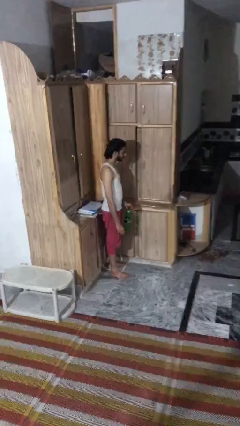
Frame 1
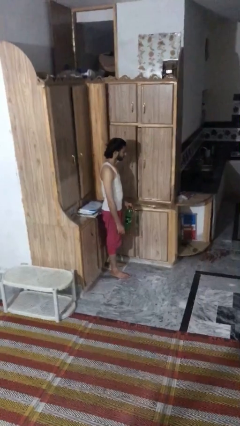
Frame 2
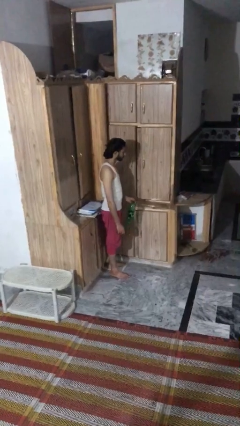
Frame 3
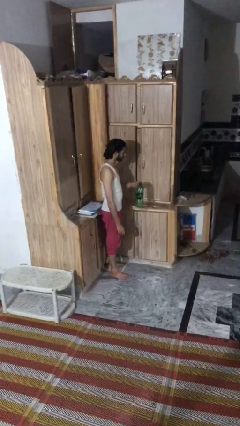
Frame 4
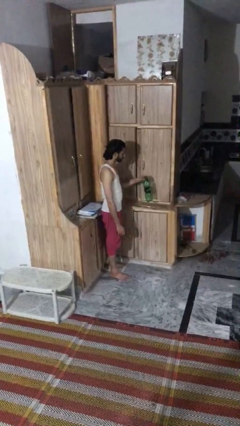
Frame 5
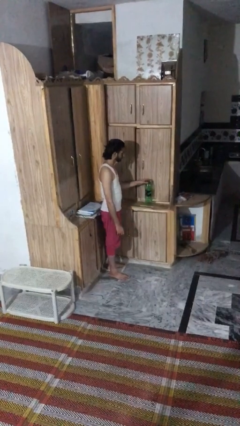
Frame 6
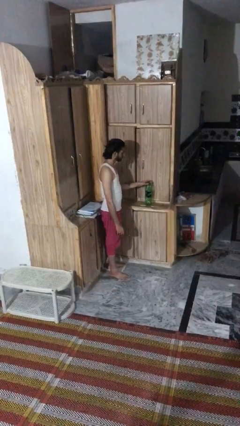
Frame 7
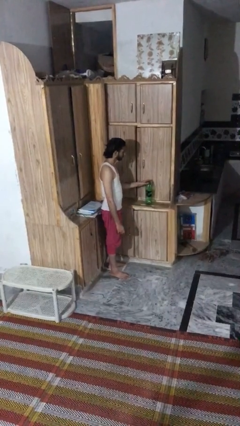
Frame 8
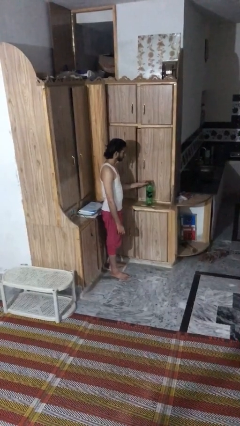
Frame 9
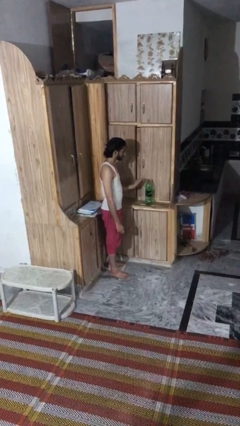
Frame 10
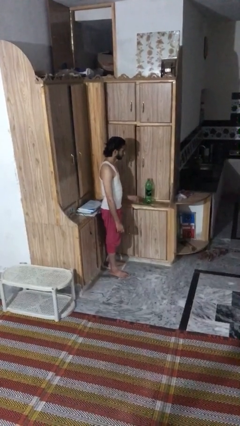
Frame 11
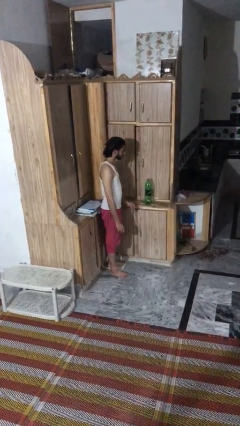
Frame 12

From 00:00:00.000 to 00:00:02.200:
person puts down object on countertop

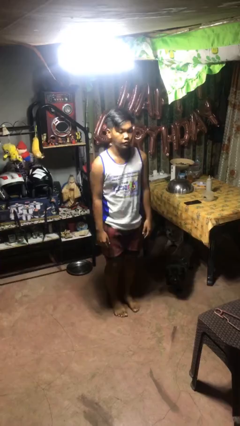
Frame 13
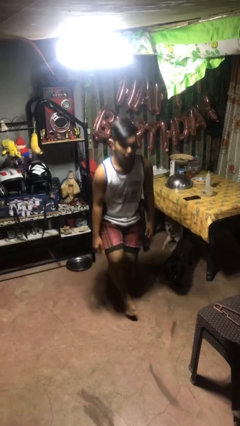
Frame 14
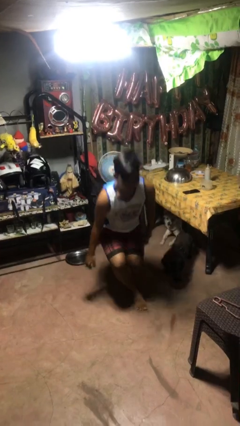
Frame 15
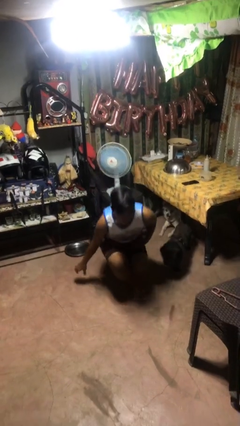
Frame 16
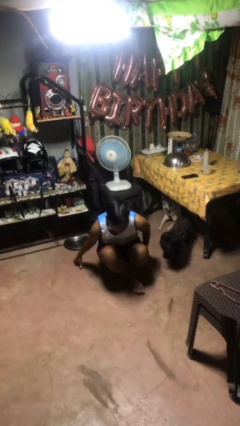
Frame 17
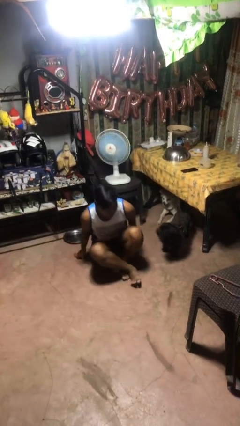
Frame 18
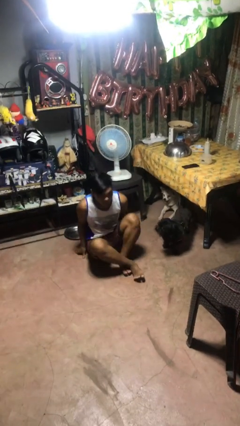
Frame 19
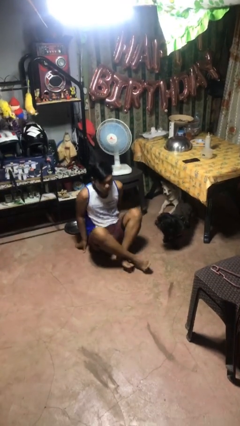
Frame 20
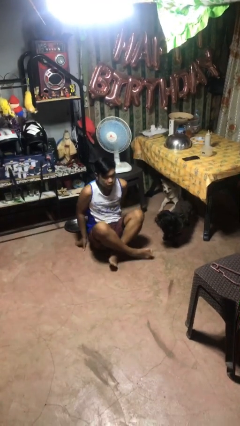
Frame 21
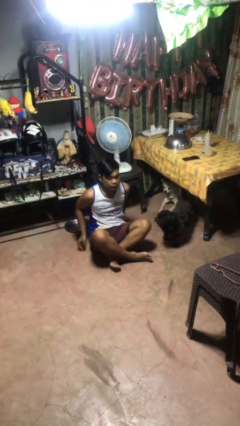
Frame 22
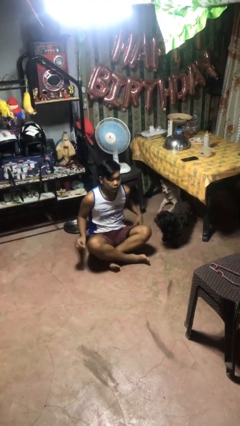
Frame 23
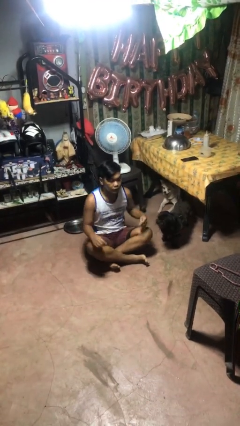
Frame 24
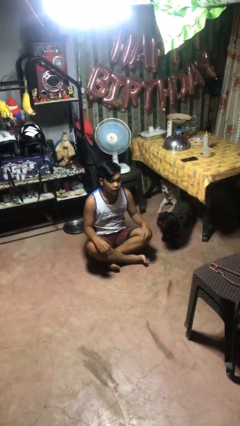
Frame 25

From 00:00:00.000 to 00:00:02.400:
person sits crisscross

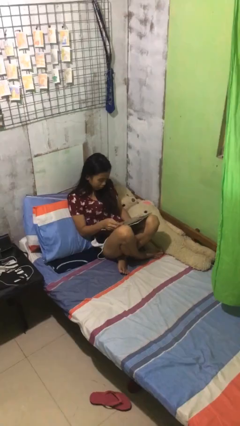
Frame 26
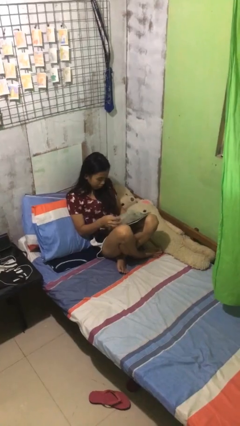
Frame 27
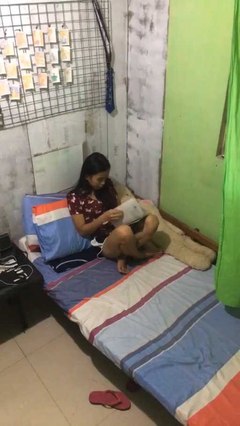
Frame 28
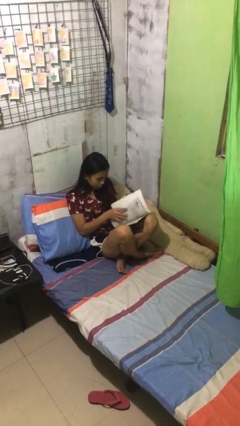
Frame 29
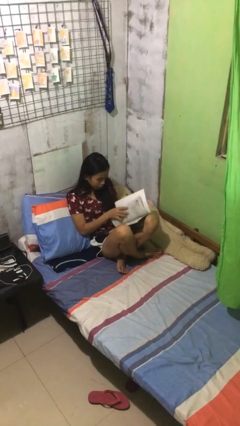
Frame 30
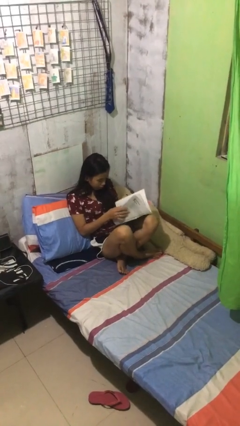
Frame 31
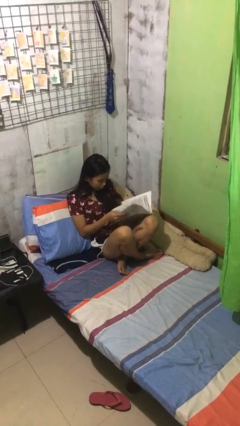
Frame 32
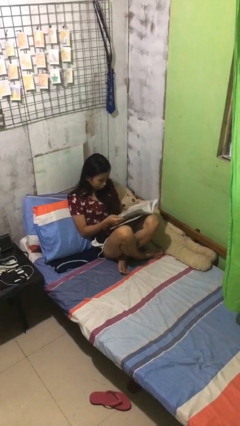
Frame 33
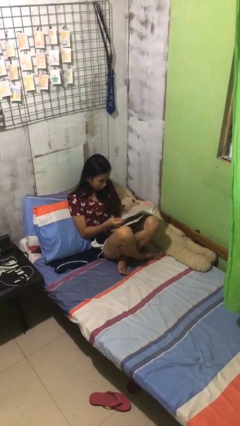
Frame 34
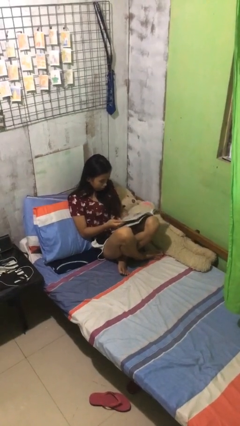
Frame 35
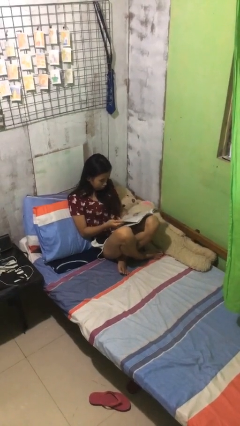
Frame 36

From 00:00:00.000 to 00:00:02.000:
person reads document

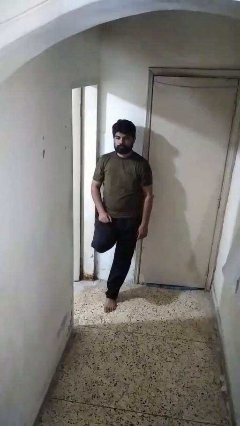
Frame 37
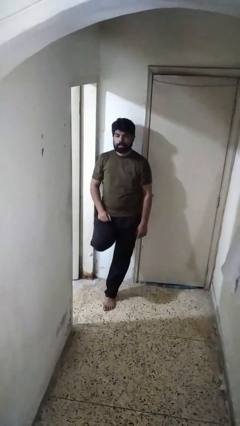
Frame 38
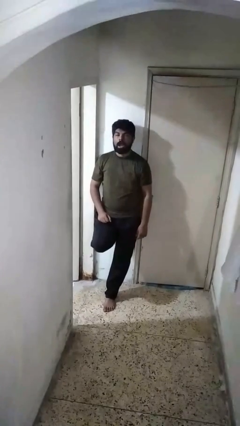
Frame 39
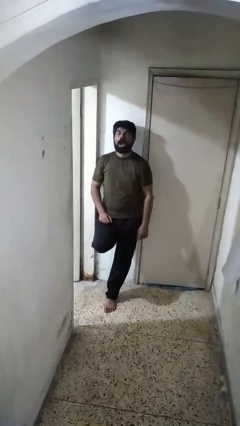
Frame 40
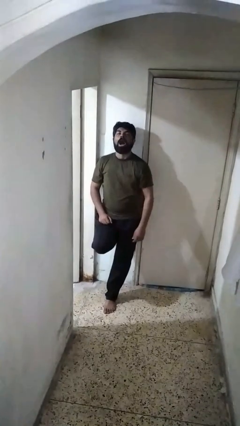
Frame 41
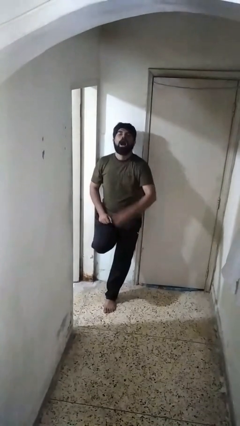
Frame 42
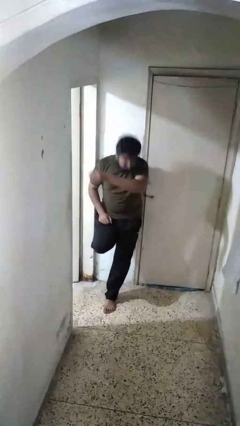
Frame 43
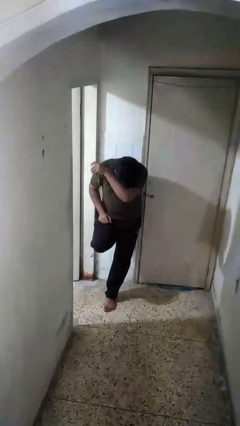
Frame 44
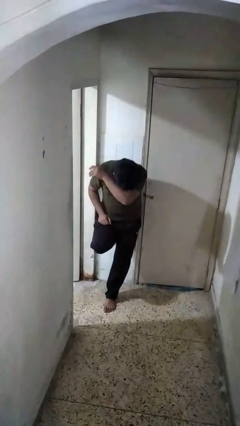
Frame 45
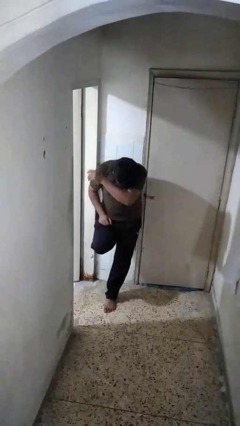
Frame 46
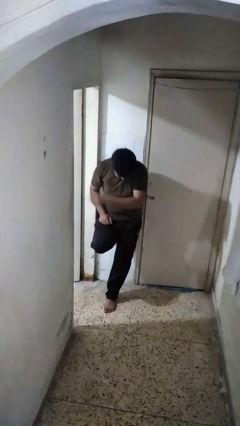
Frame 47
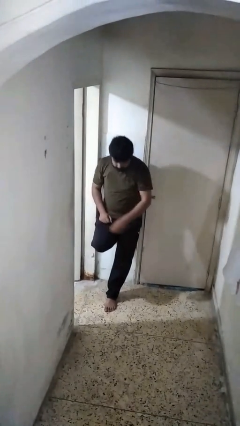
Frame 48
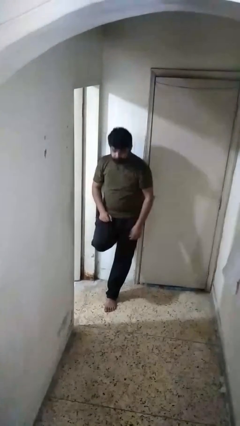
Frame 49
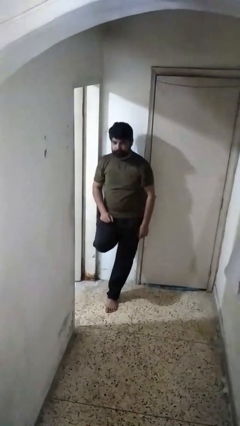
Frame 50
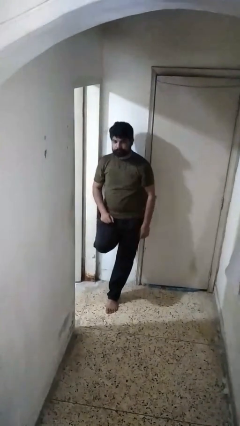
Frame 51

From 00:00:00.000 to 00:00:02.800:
person sneezes into arm

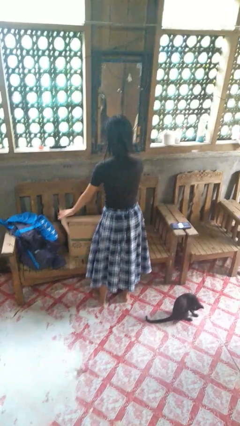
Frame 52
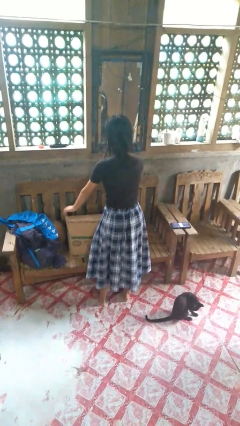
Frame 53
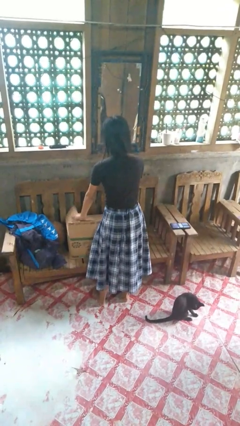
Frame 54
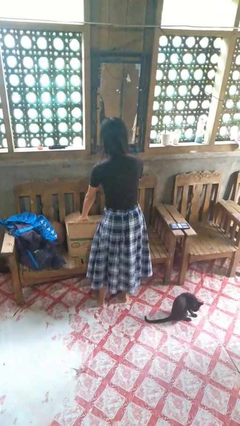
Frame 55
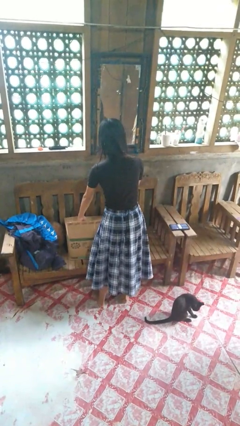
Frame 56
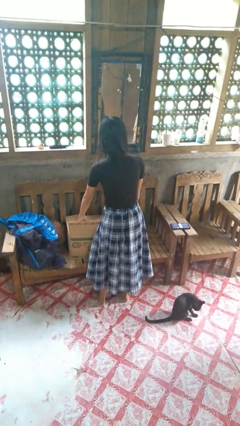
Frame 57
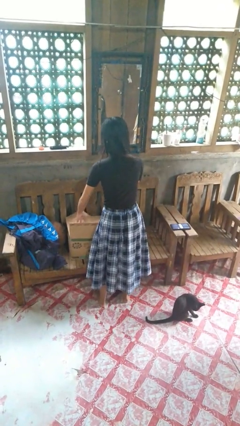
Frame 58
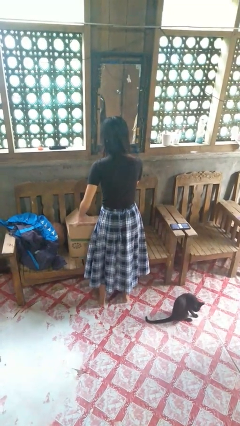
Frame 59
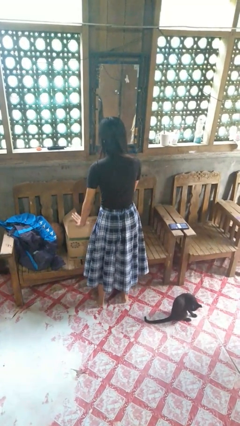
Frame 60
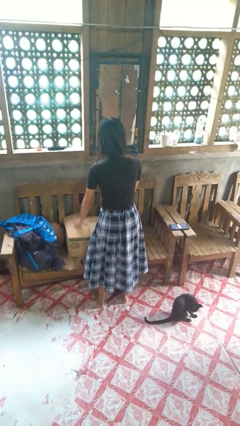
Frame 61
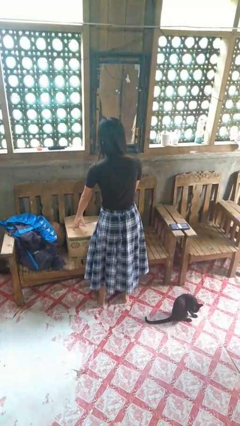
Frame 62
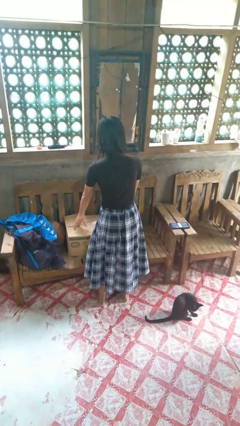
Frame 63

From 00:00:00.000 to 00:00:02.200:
person closes box

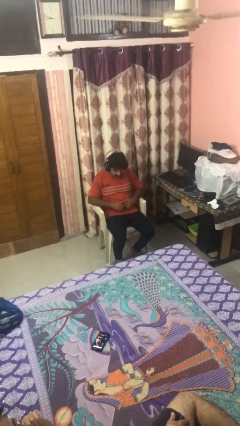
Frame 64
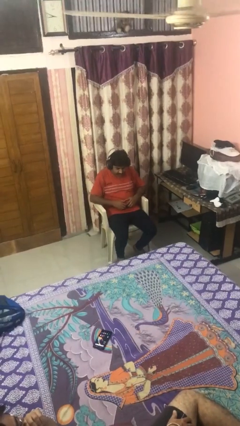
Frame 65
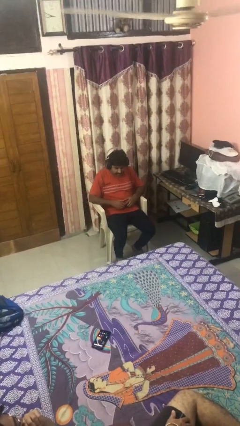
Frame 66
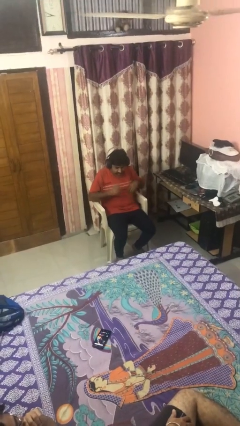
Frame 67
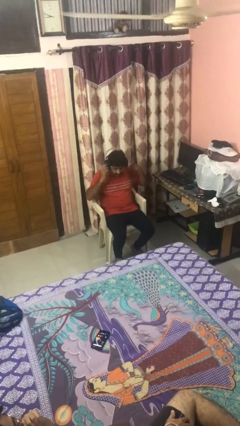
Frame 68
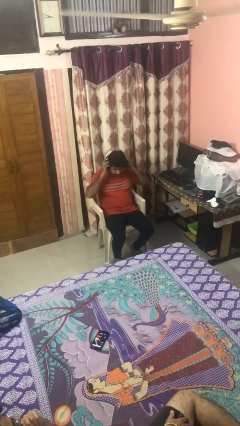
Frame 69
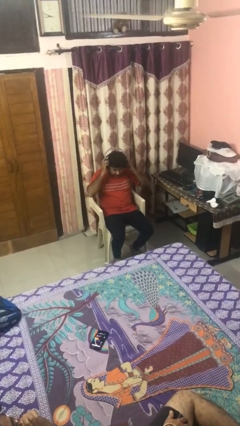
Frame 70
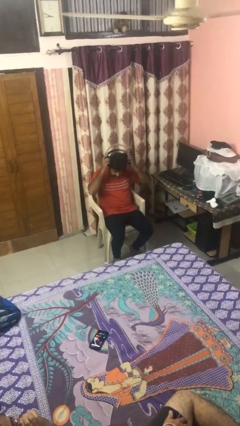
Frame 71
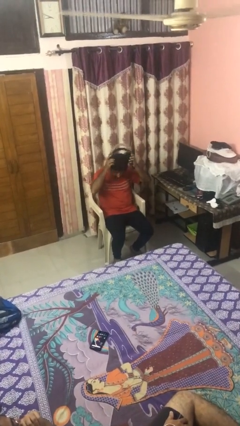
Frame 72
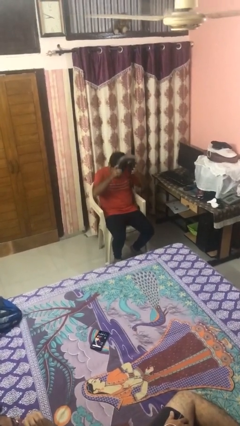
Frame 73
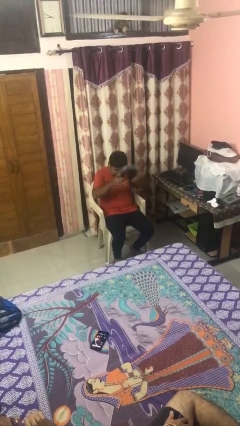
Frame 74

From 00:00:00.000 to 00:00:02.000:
person takes off headphones

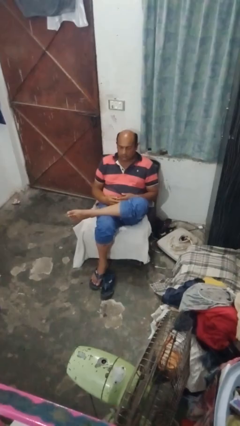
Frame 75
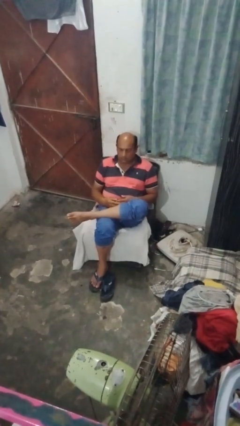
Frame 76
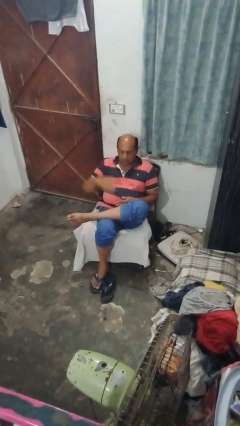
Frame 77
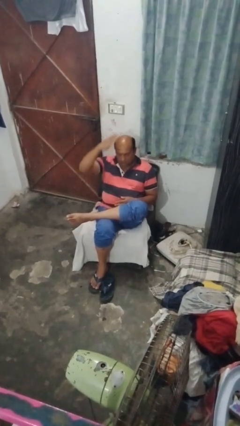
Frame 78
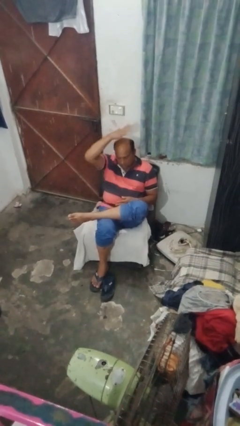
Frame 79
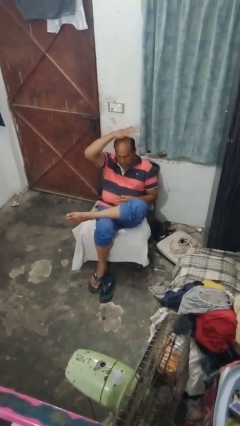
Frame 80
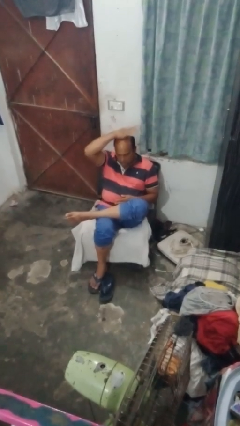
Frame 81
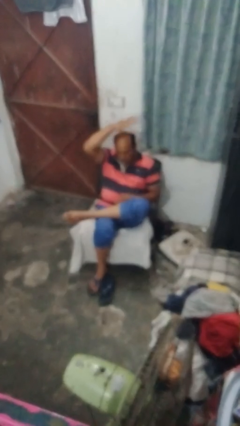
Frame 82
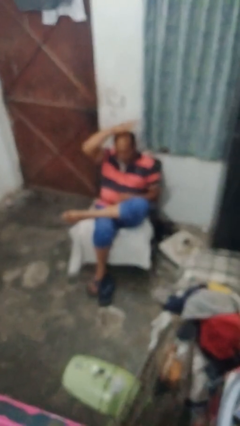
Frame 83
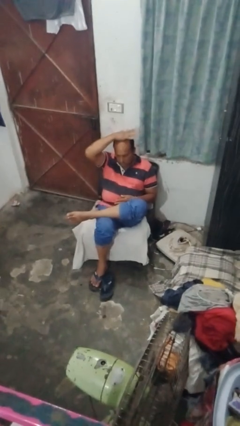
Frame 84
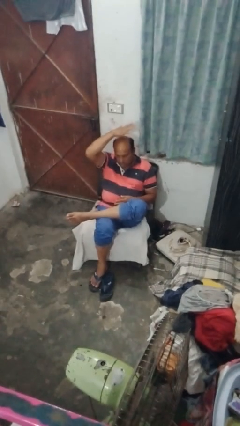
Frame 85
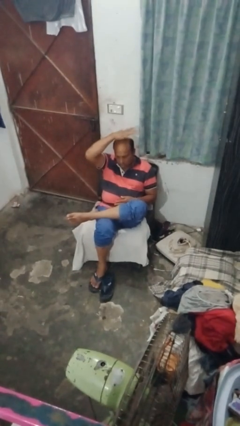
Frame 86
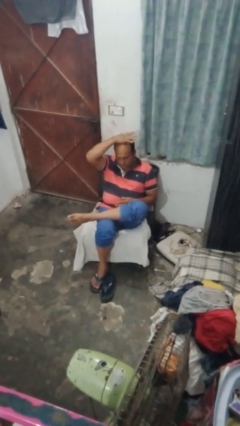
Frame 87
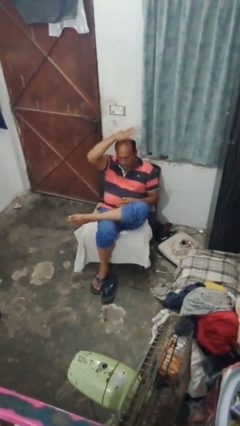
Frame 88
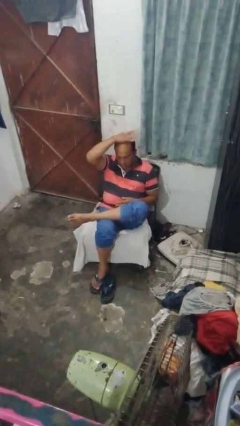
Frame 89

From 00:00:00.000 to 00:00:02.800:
person pats head

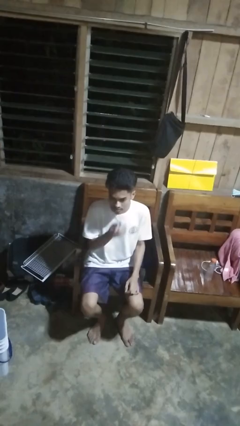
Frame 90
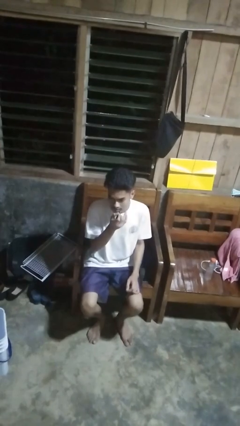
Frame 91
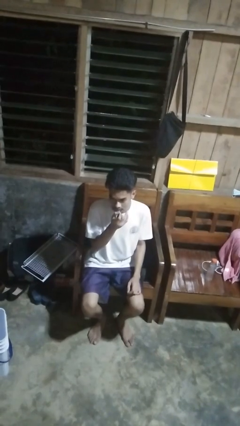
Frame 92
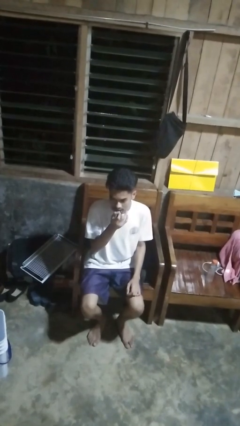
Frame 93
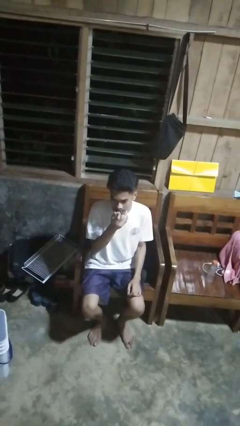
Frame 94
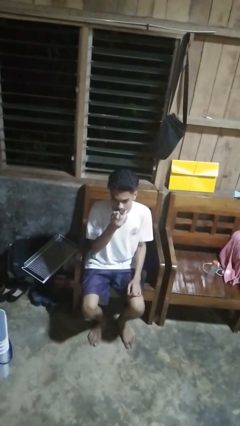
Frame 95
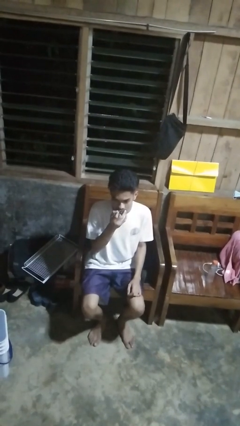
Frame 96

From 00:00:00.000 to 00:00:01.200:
person applies lip makeup
